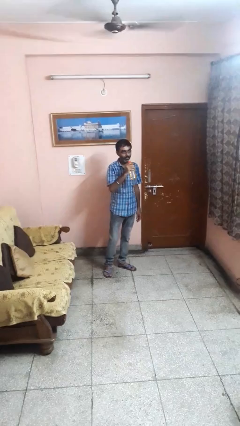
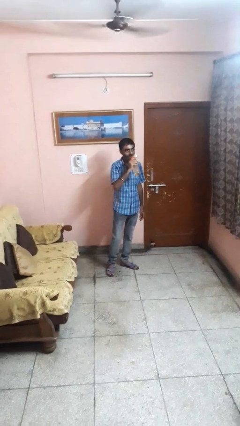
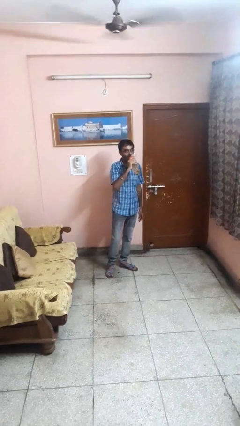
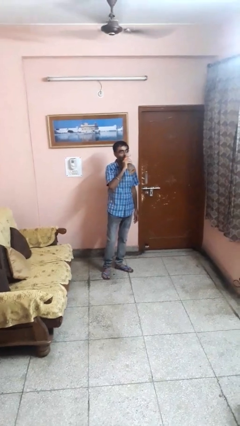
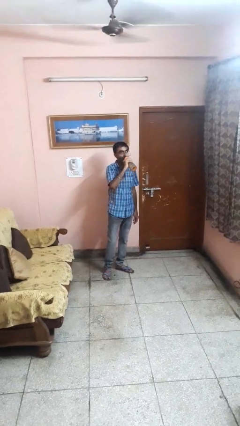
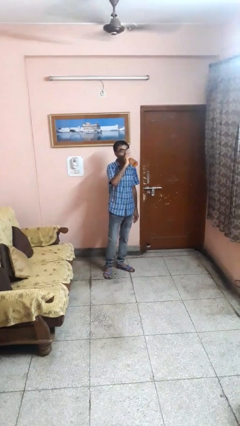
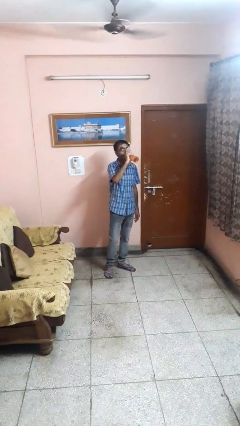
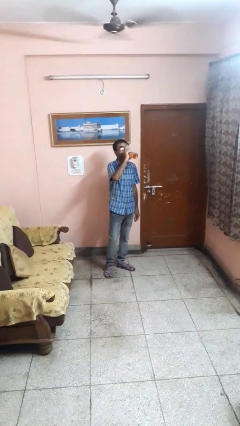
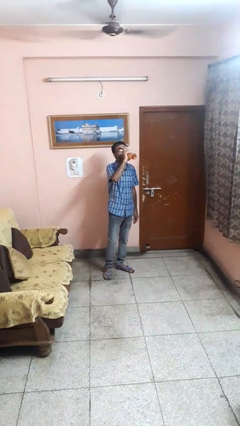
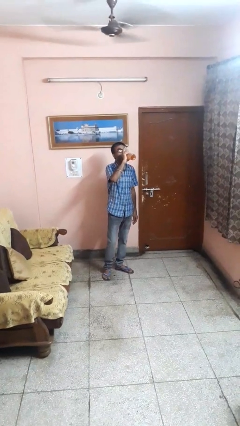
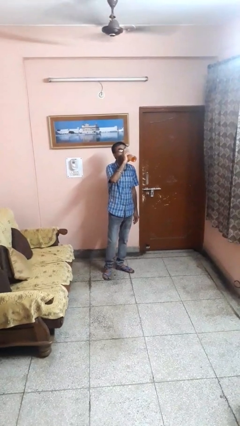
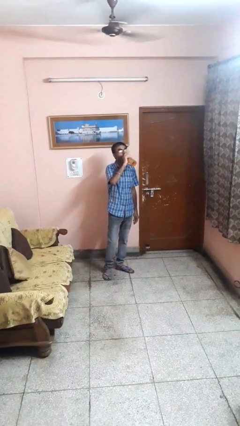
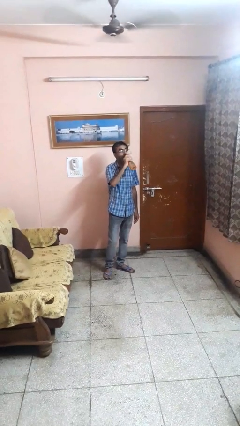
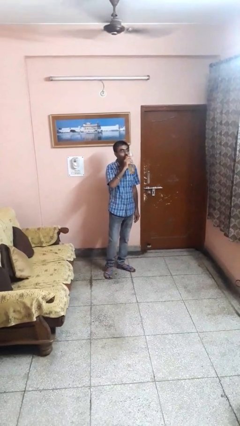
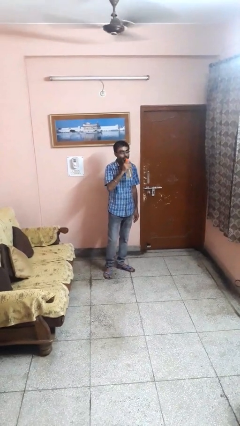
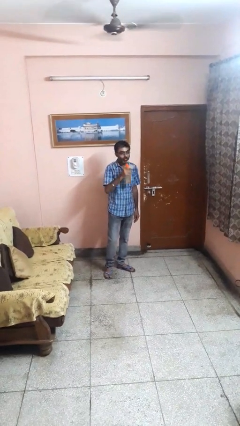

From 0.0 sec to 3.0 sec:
person drinks from bottle

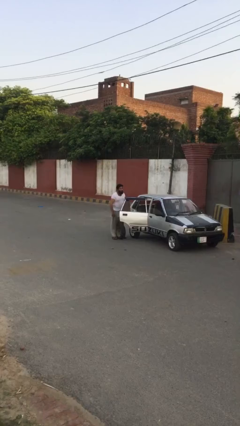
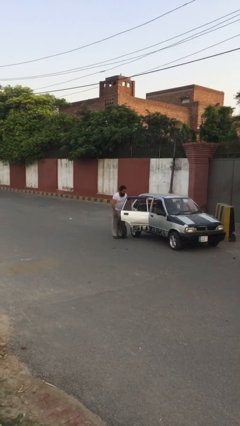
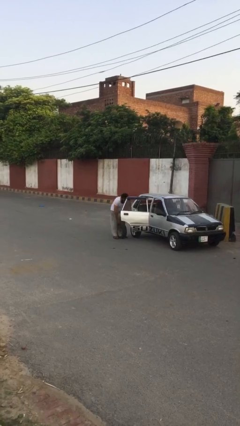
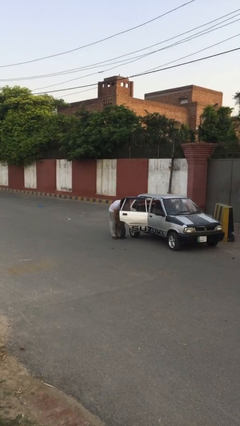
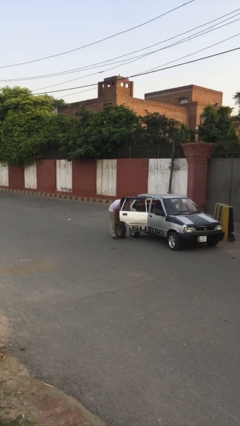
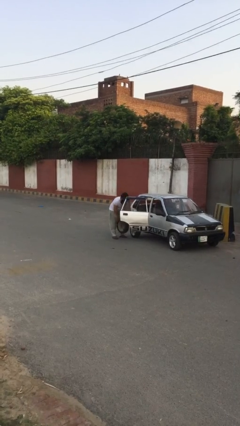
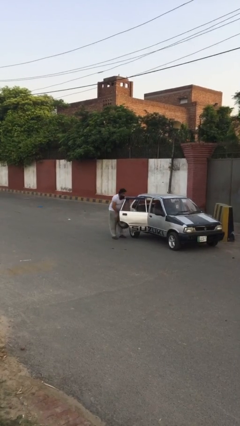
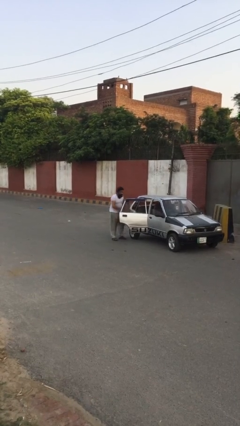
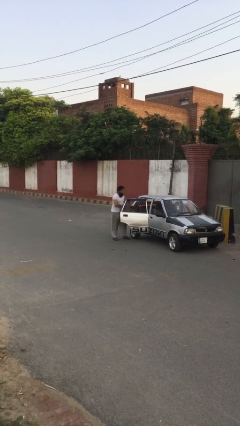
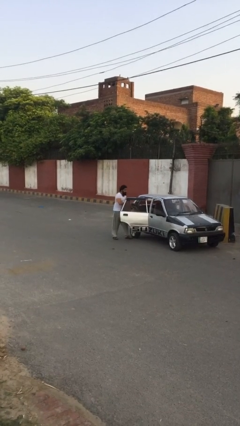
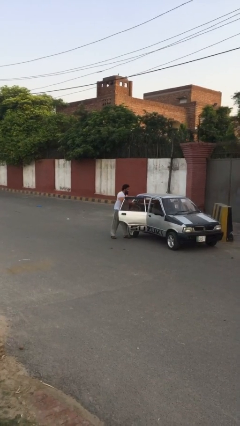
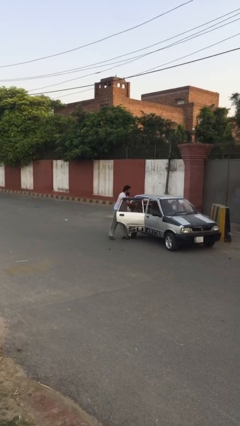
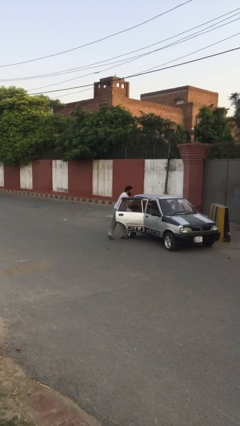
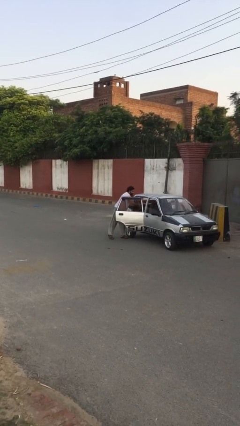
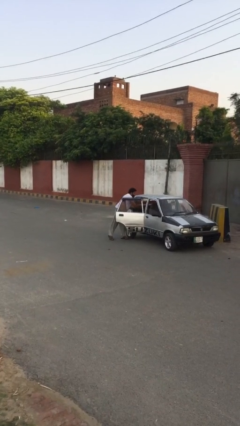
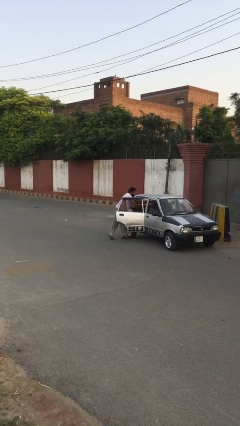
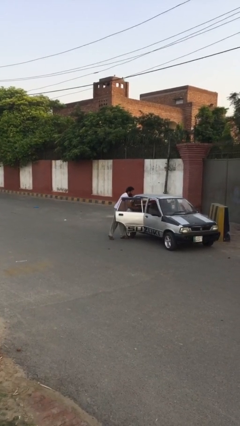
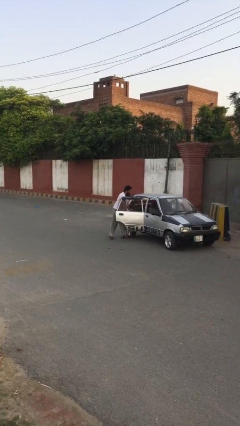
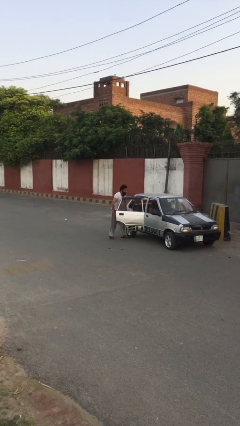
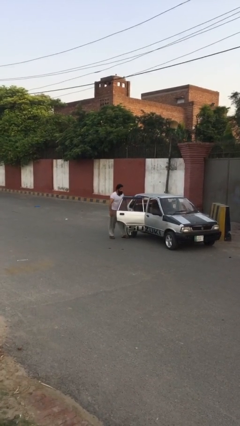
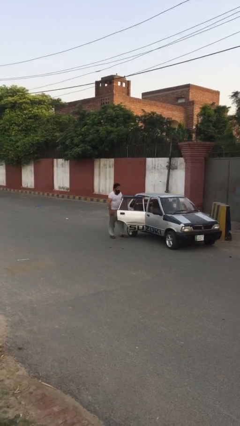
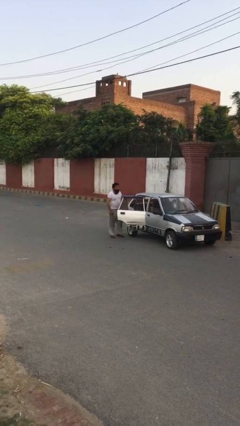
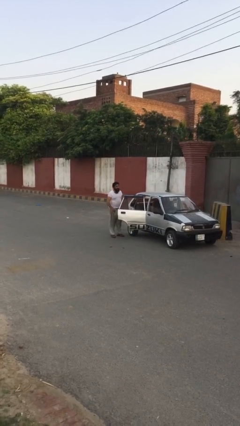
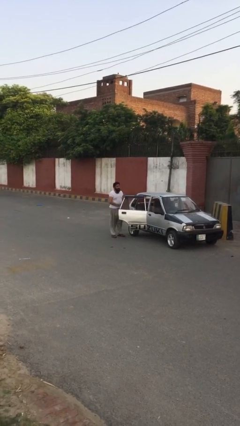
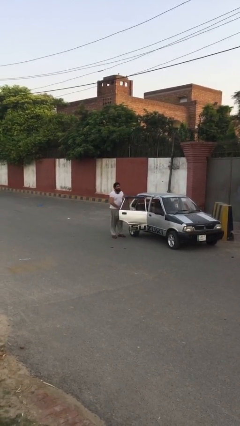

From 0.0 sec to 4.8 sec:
person loads car

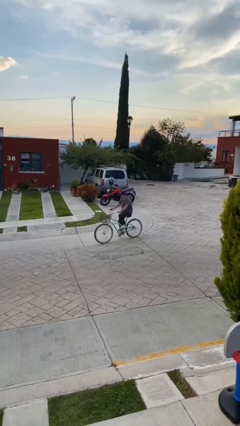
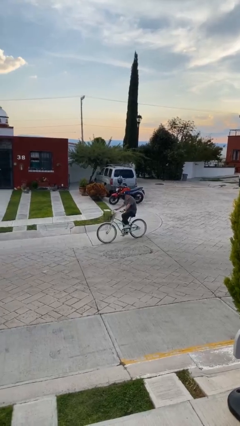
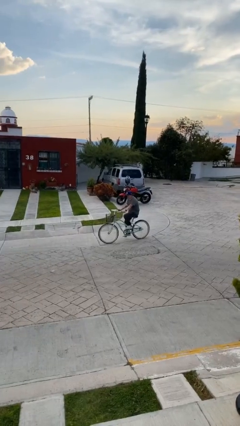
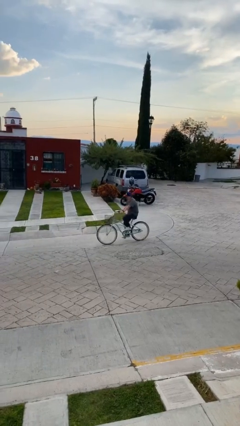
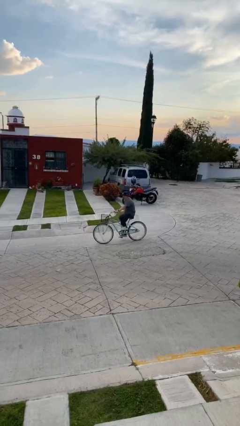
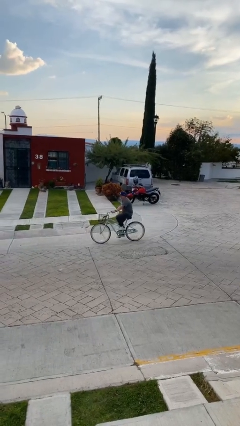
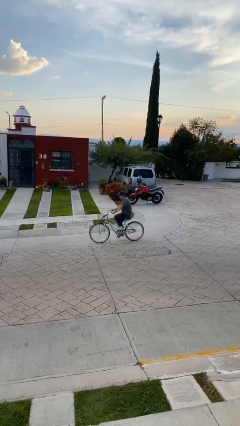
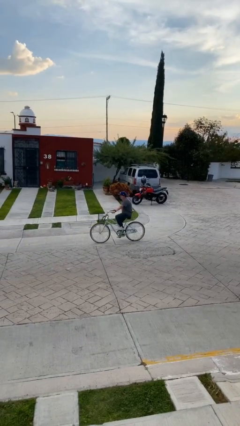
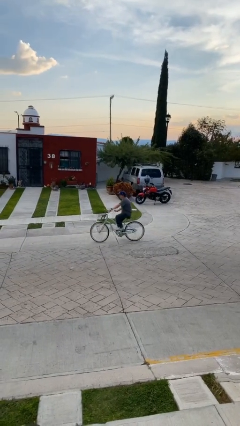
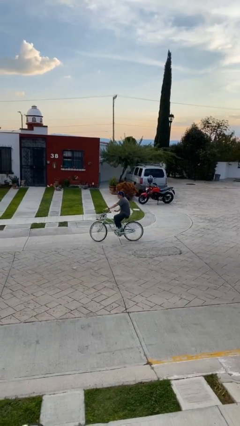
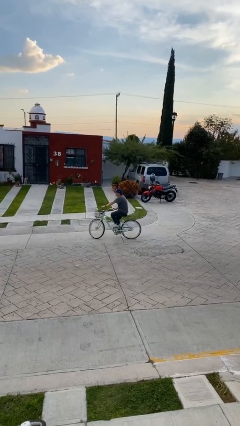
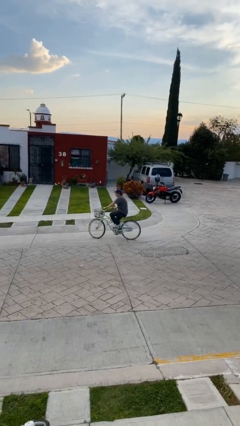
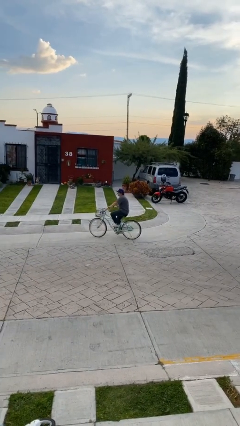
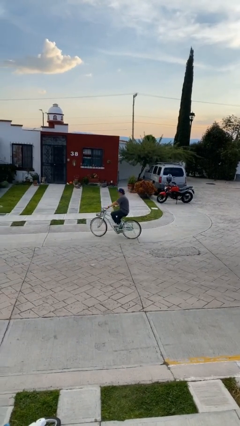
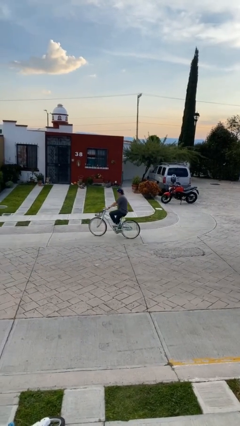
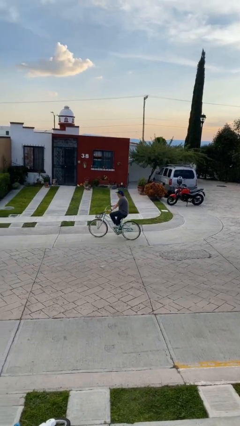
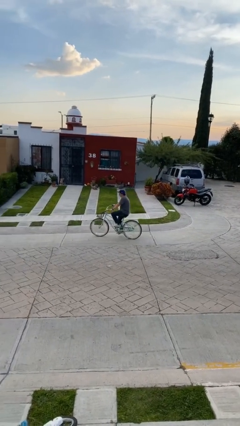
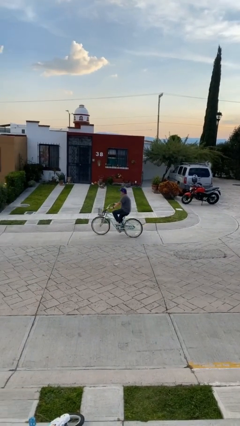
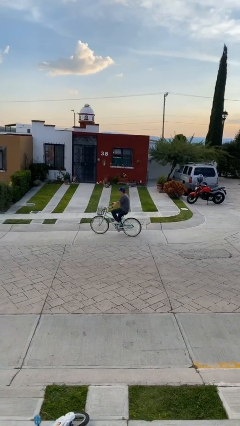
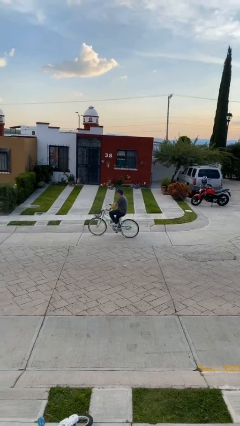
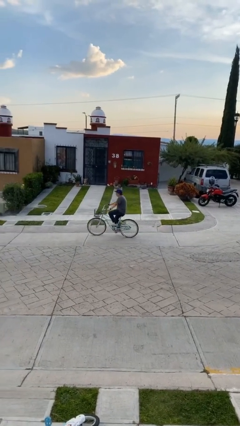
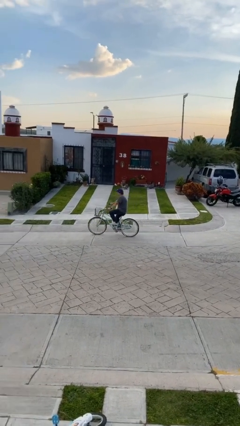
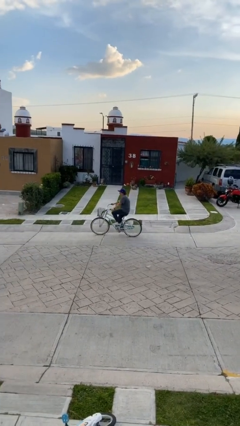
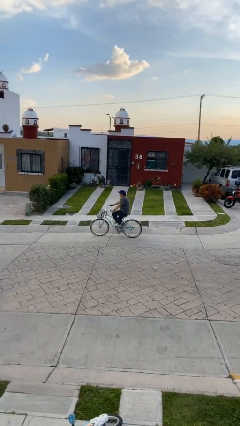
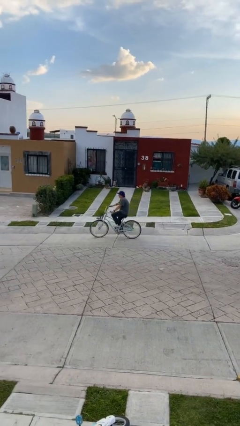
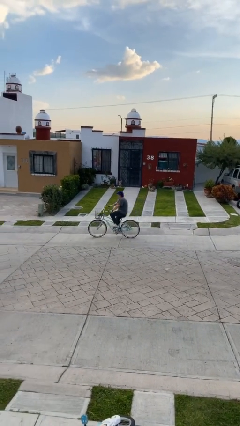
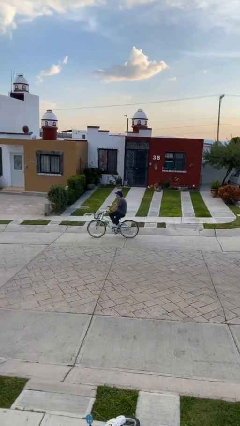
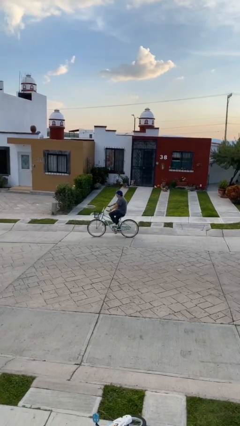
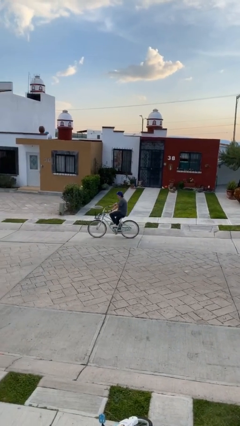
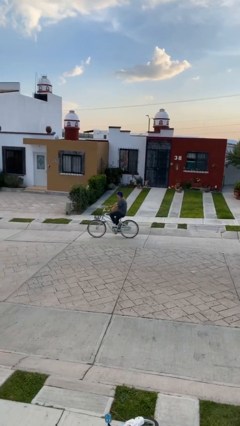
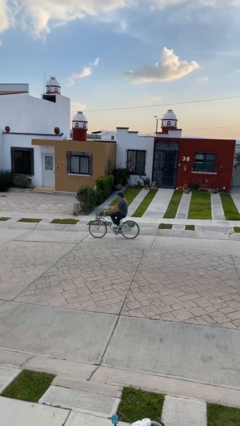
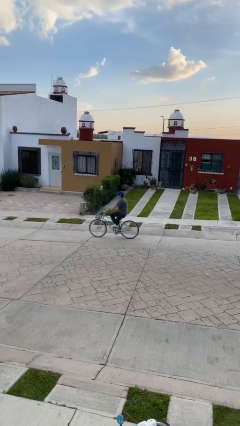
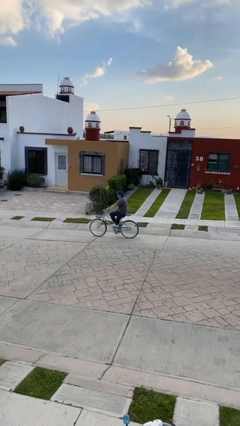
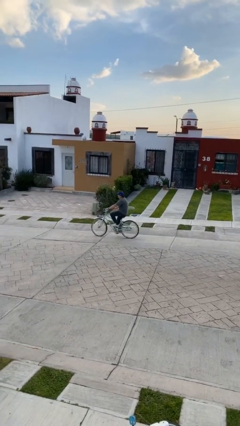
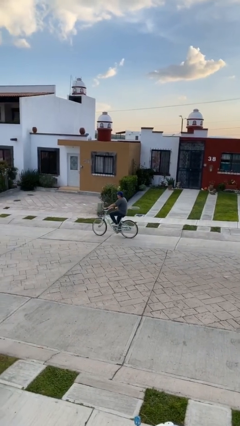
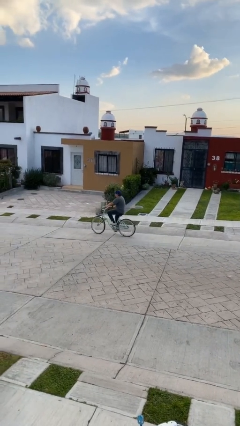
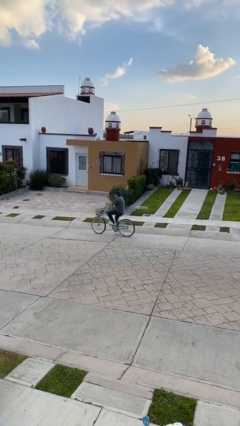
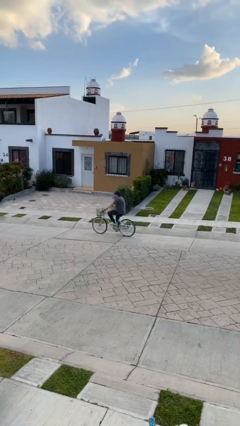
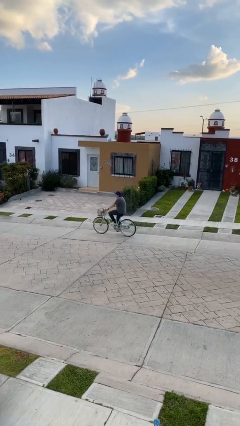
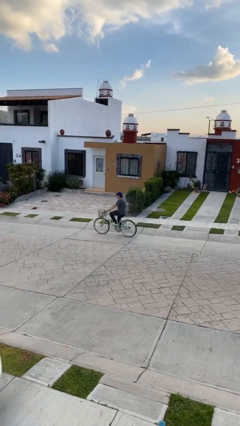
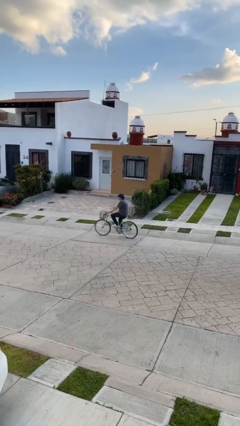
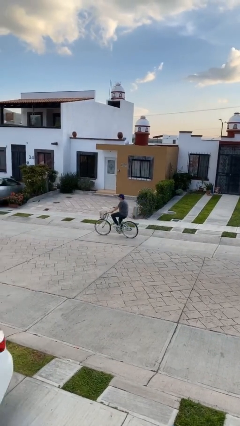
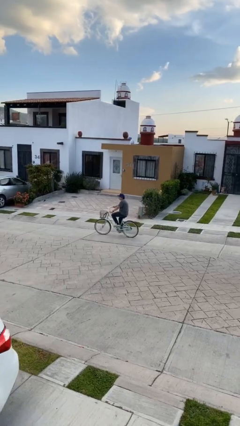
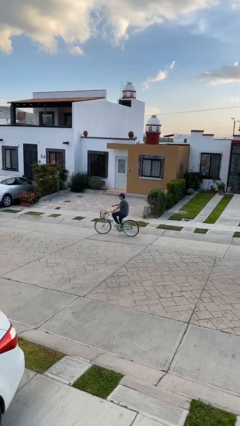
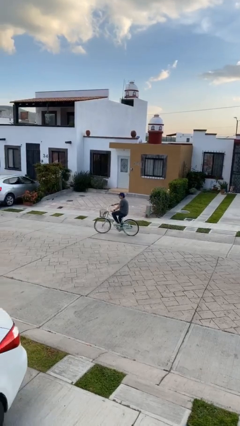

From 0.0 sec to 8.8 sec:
person rides bicycle

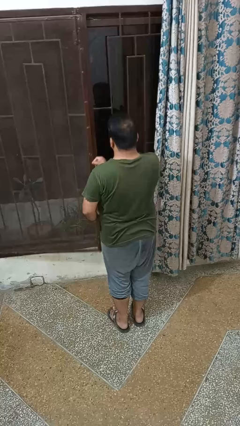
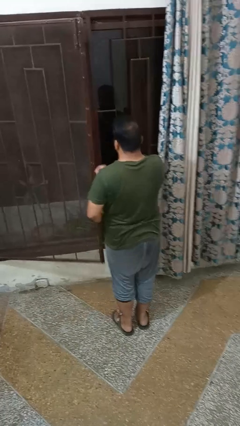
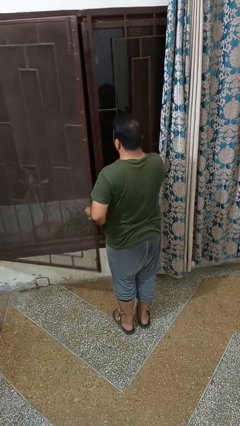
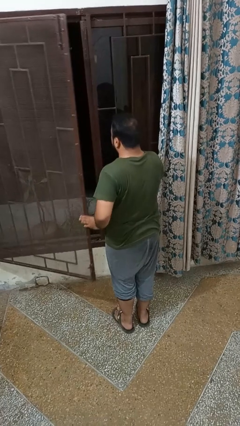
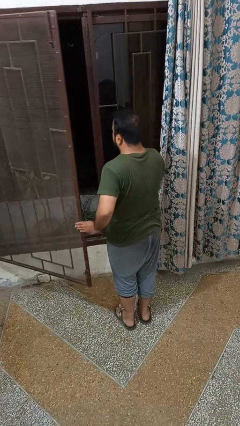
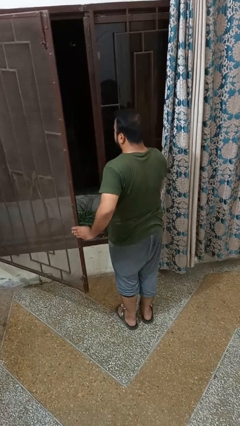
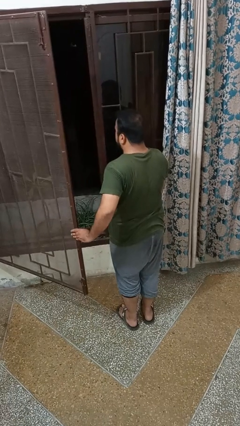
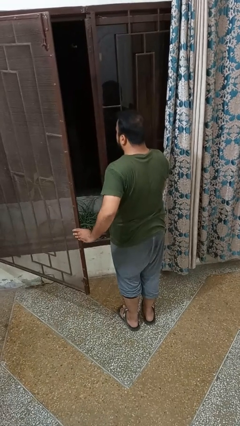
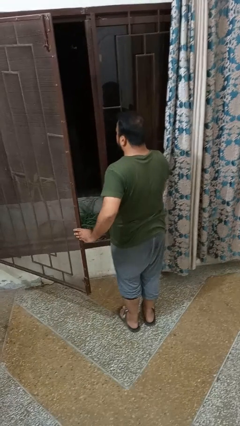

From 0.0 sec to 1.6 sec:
person opens home window
